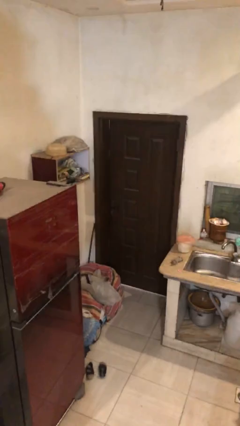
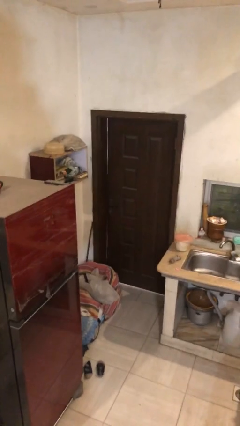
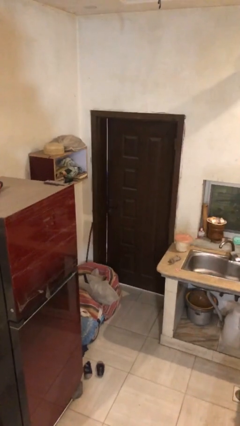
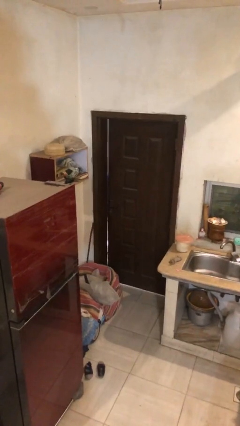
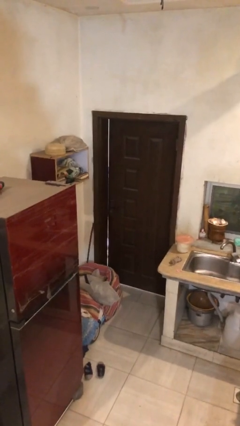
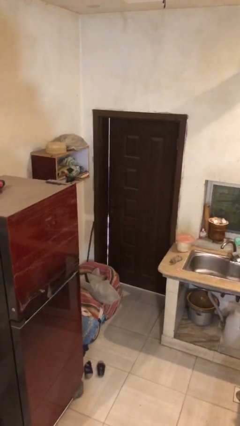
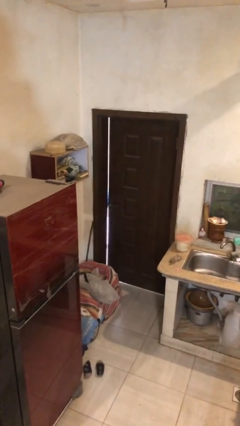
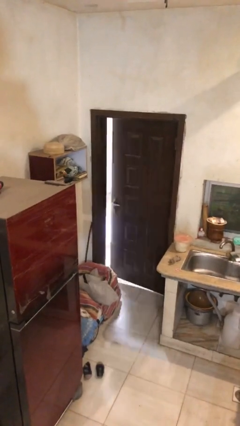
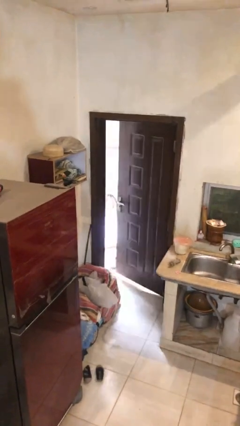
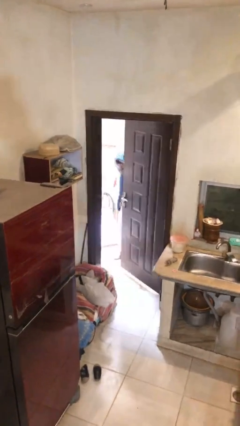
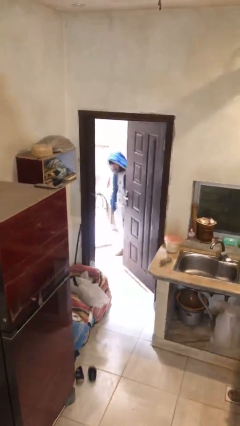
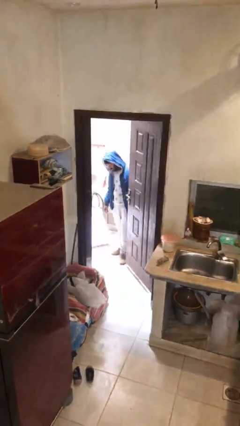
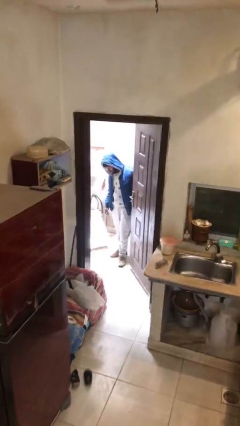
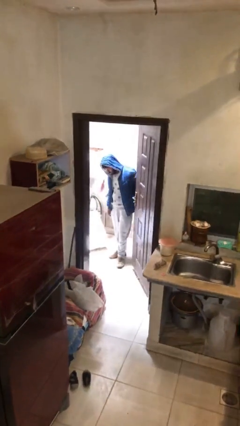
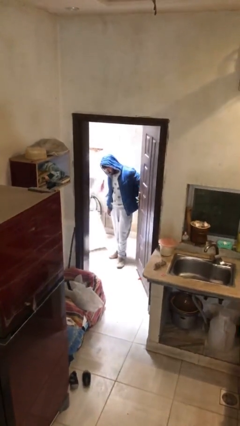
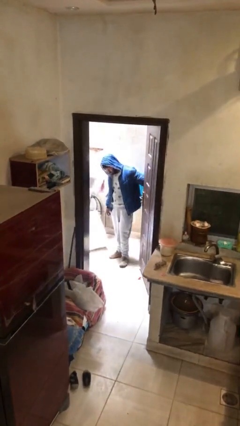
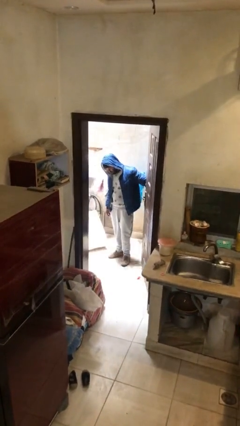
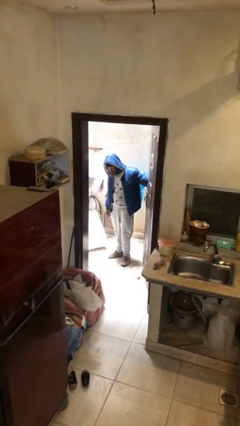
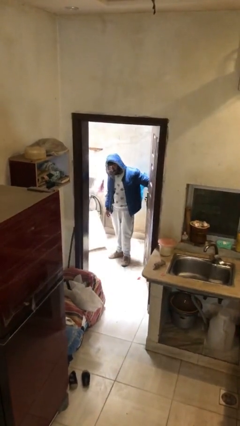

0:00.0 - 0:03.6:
person opens facility door

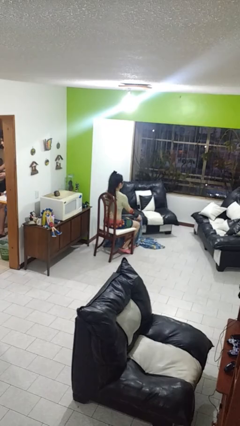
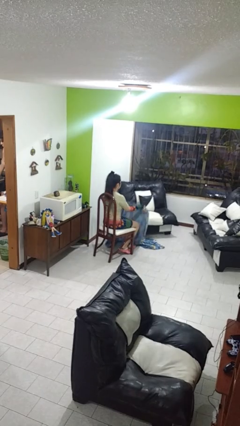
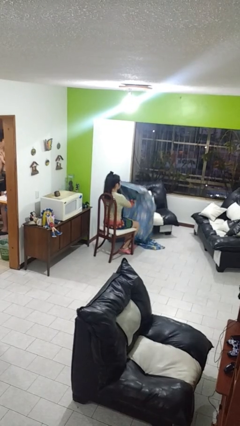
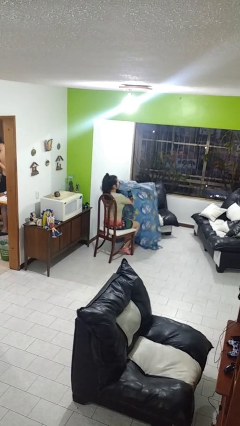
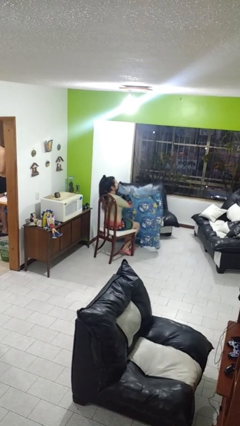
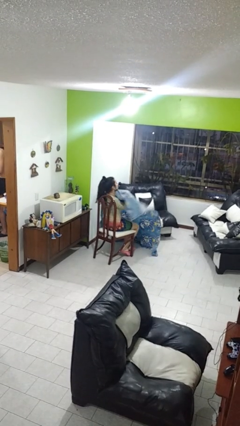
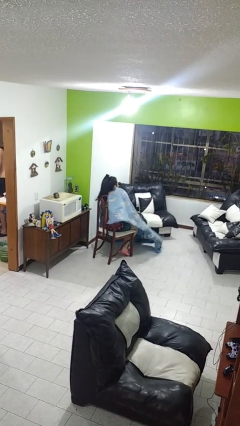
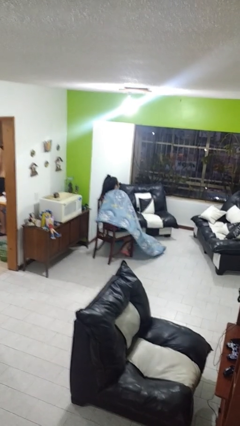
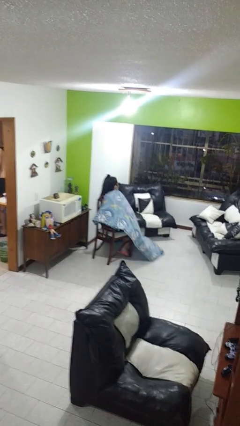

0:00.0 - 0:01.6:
person covers with blanket

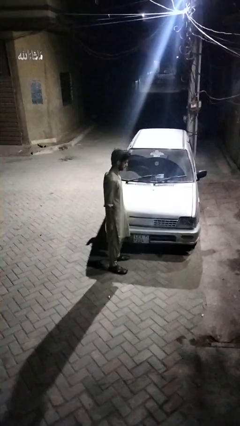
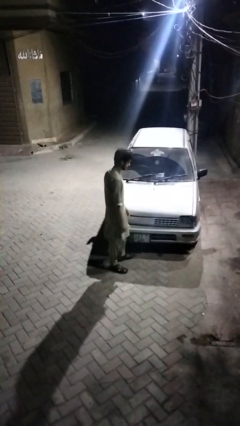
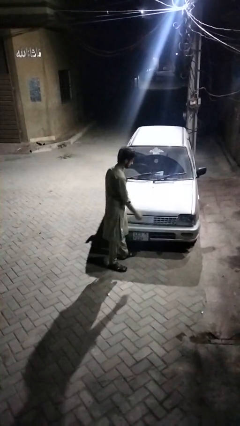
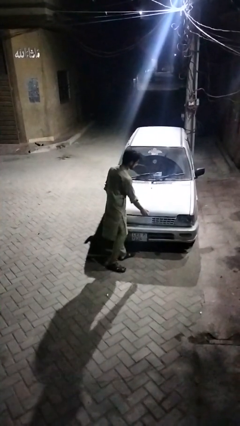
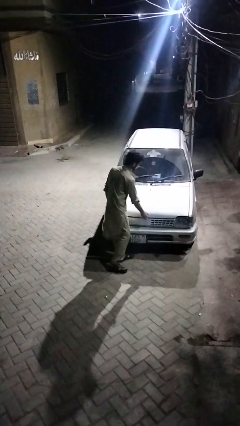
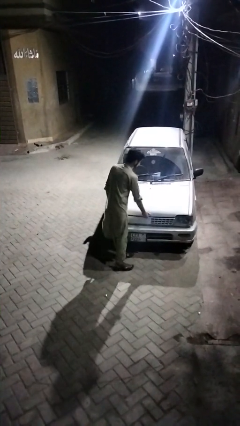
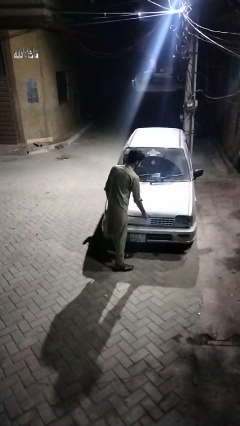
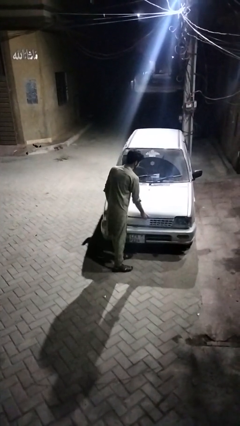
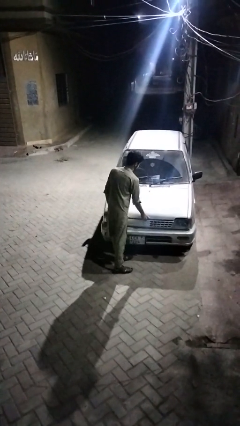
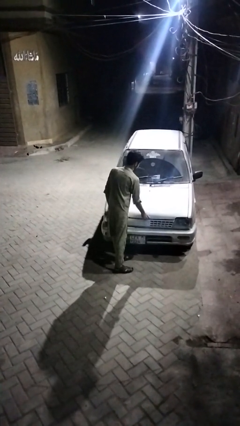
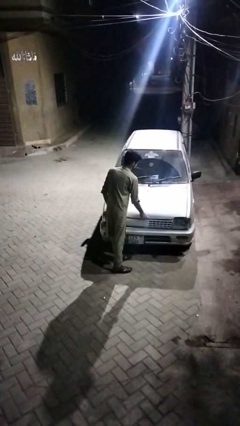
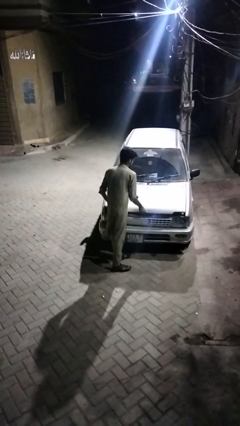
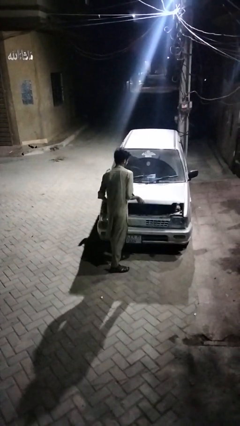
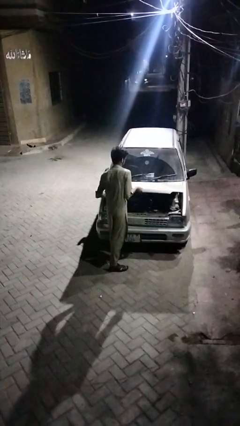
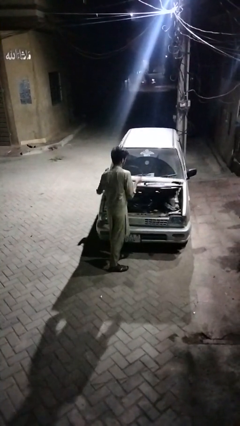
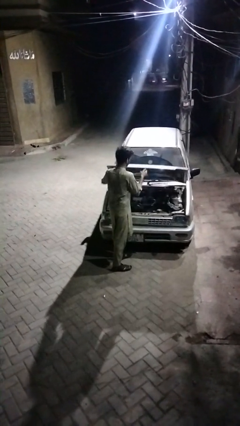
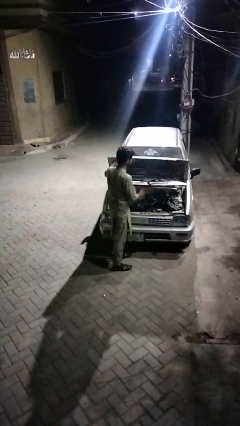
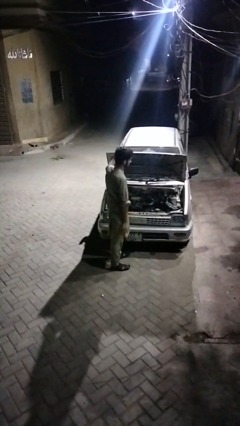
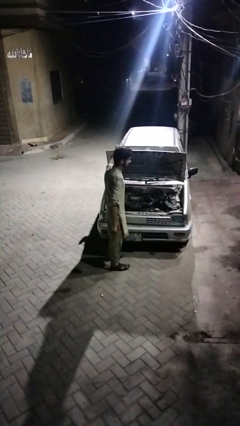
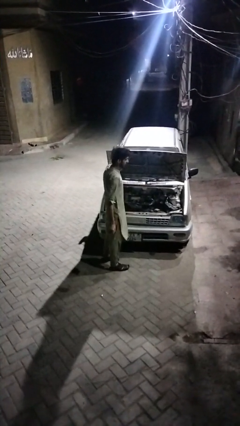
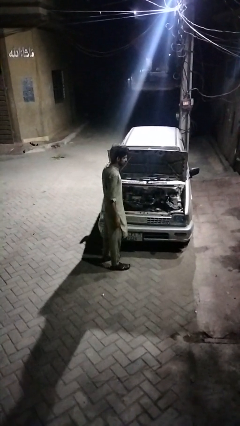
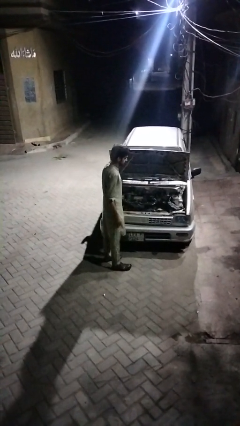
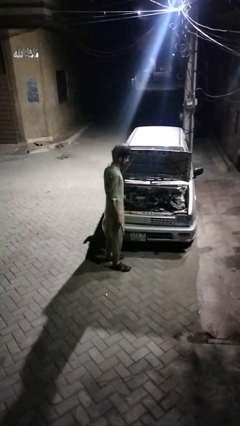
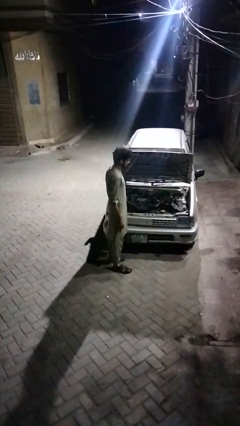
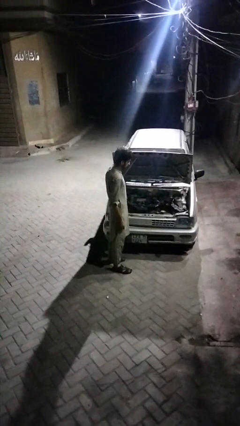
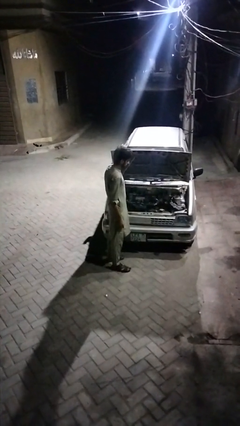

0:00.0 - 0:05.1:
person opens car hood

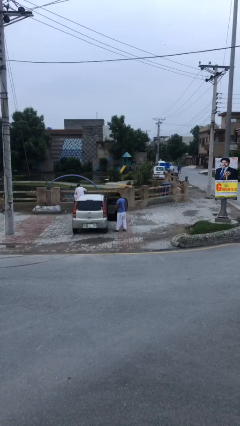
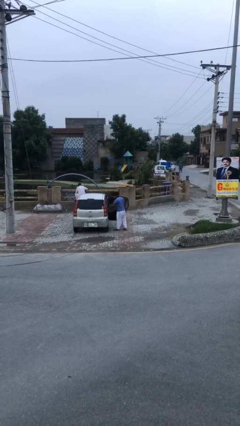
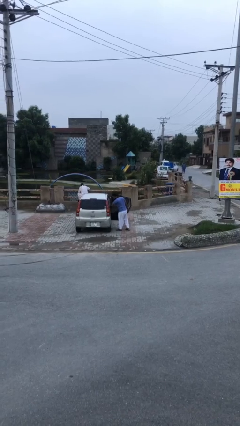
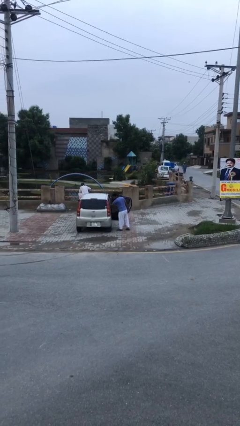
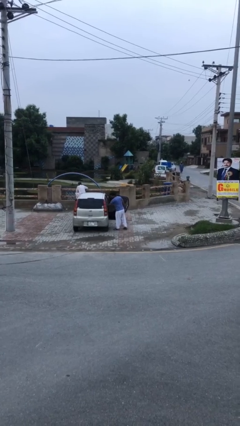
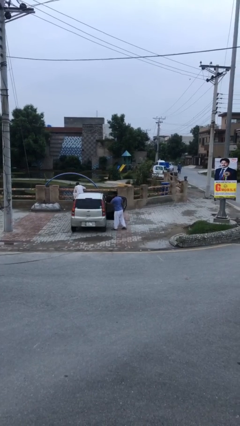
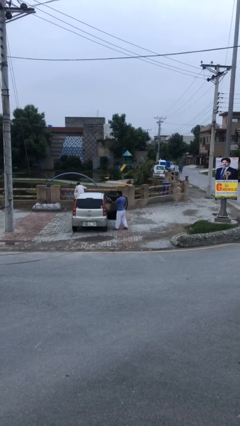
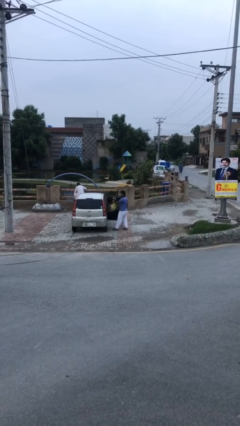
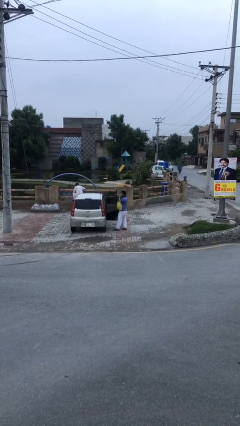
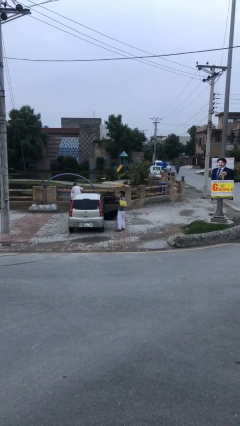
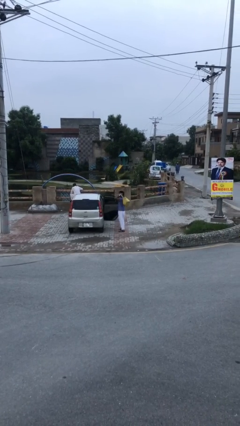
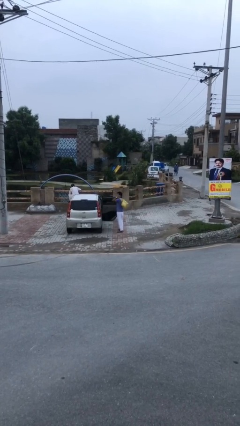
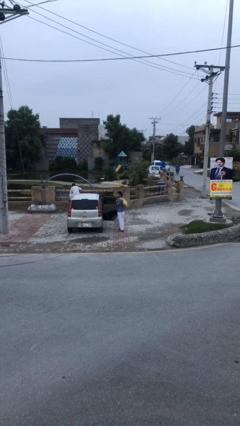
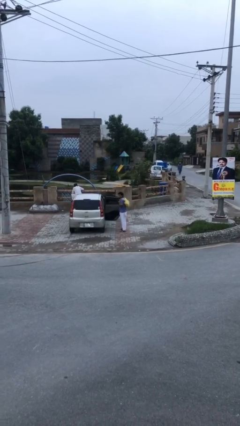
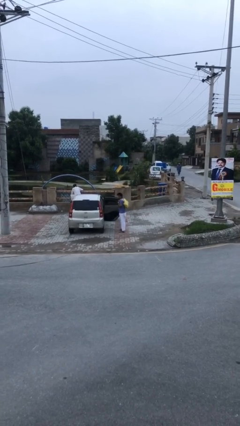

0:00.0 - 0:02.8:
person unloads car

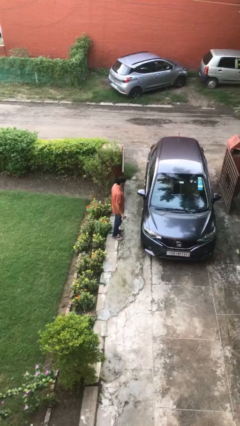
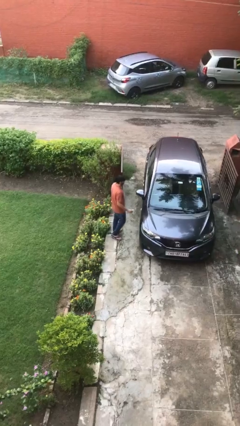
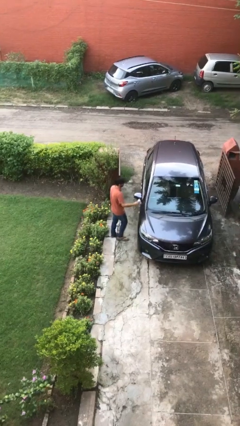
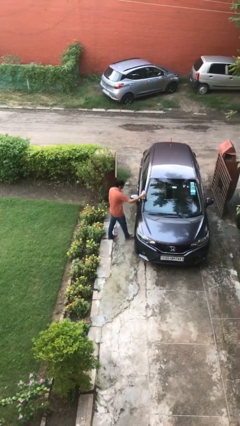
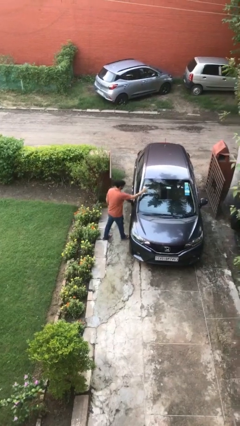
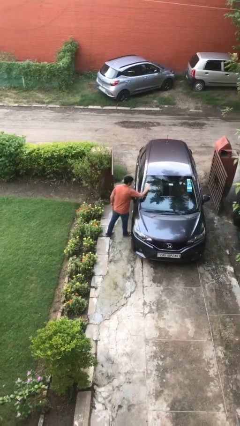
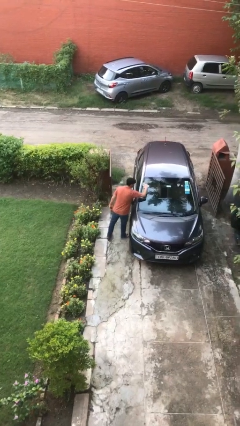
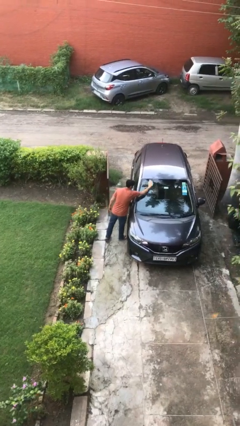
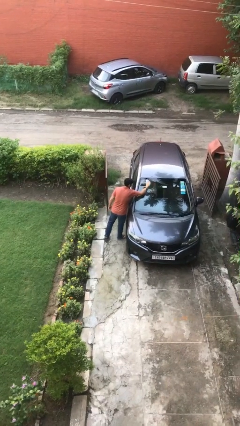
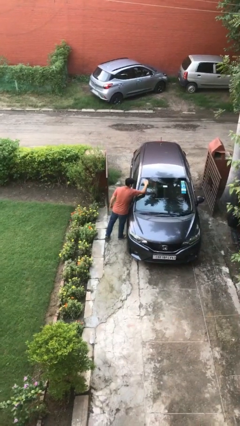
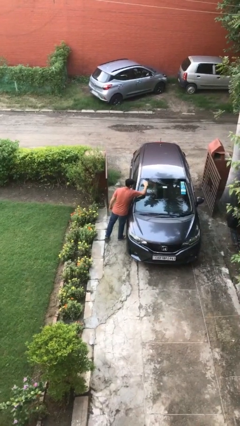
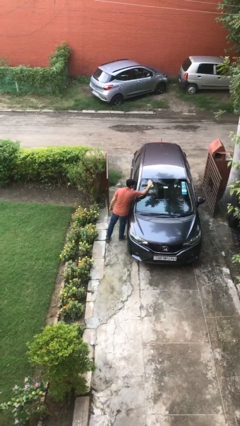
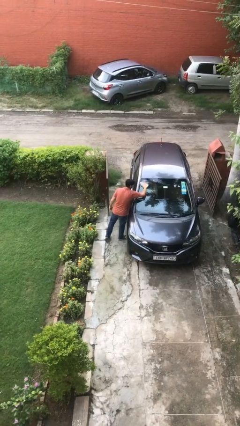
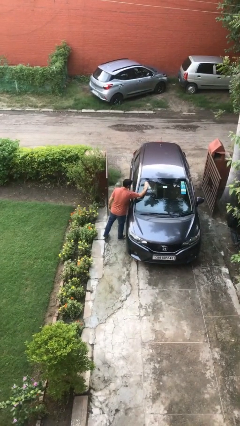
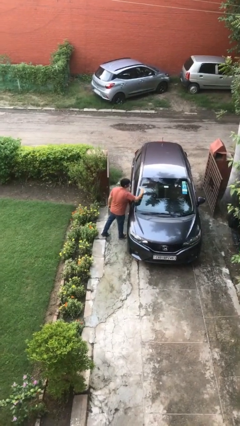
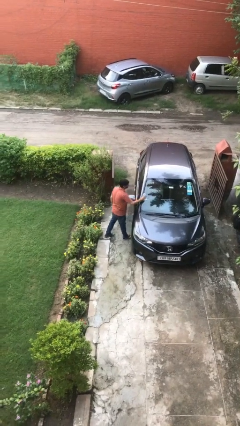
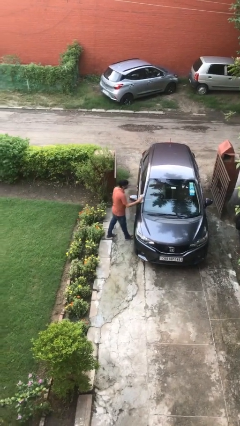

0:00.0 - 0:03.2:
person polishes car with rag

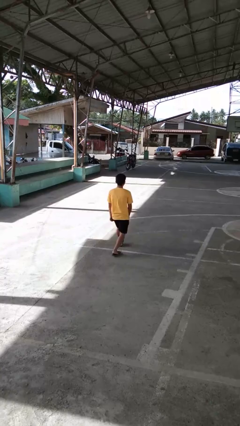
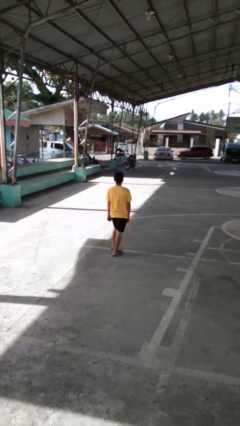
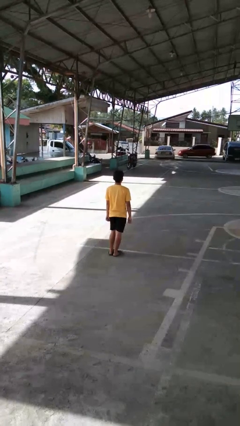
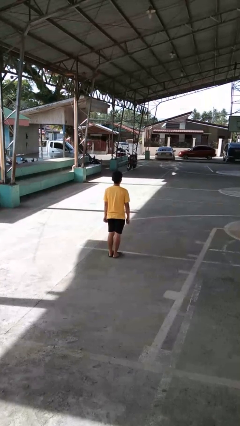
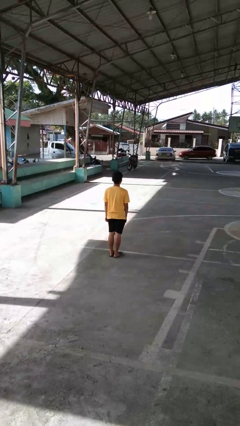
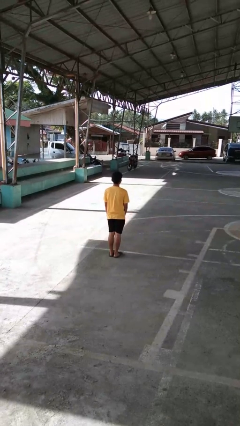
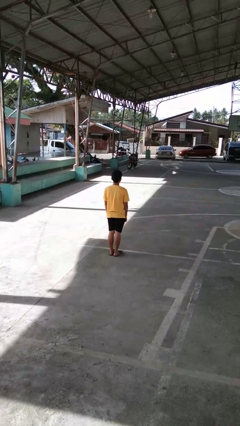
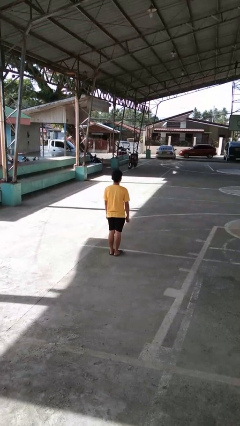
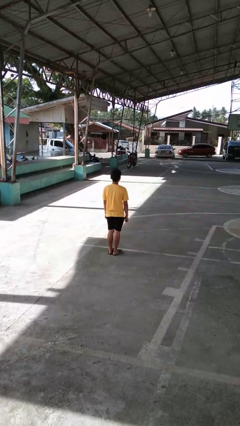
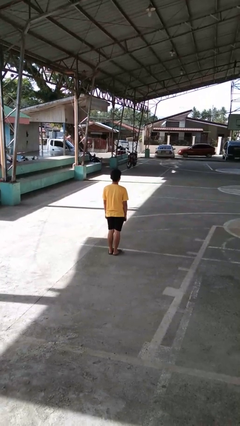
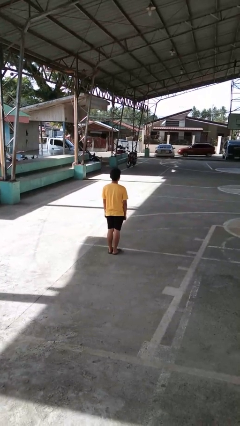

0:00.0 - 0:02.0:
person stands up from floor
